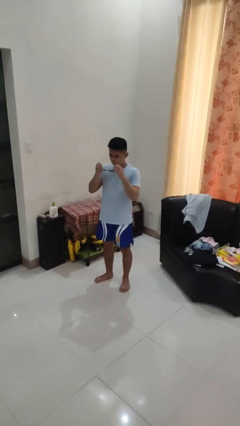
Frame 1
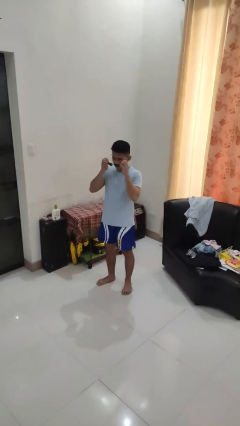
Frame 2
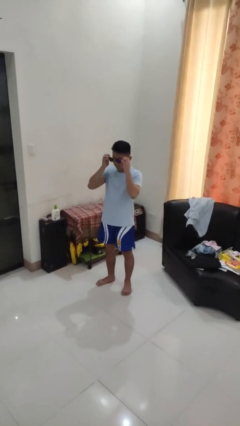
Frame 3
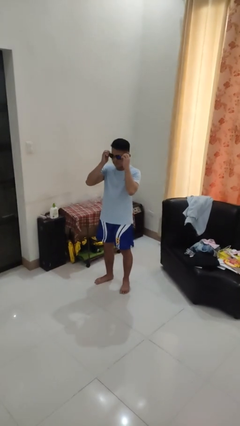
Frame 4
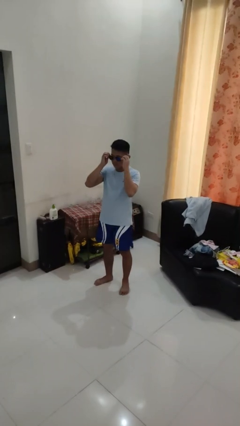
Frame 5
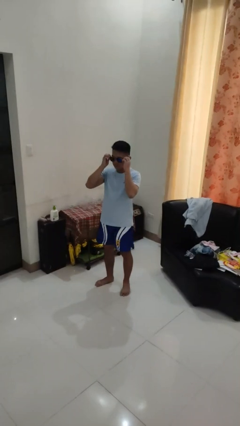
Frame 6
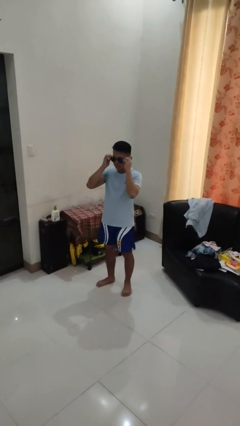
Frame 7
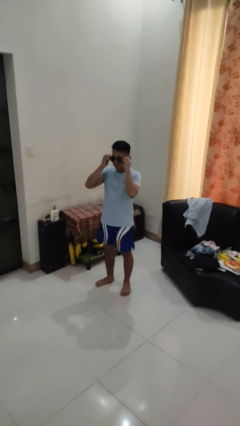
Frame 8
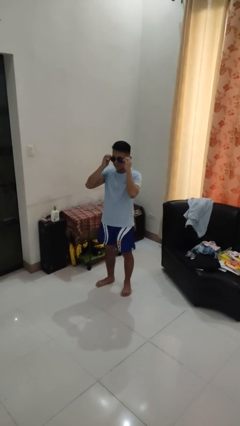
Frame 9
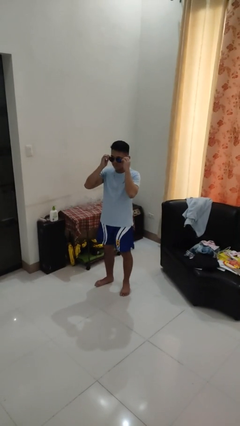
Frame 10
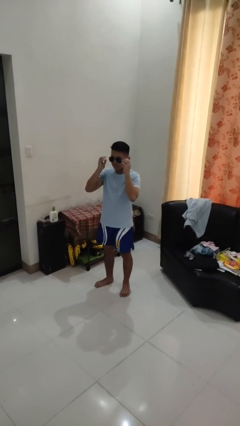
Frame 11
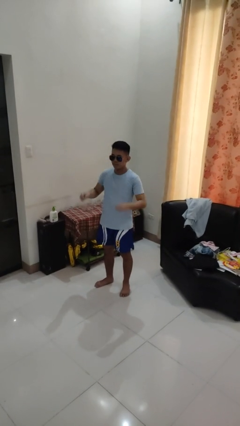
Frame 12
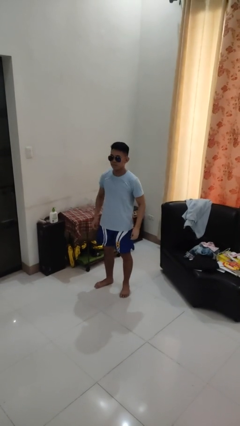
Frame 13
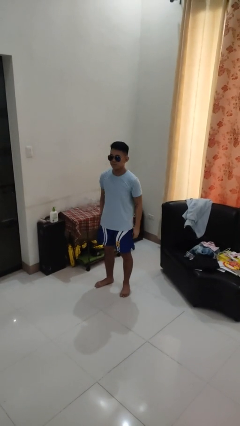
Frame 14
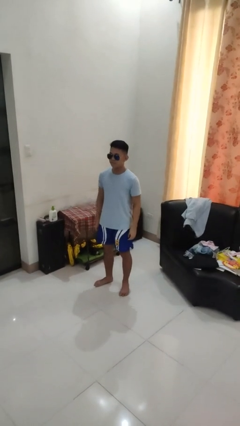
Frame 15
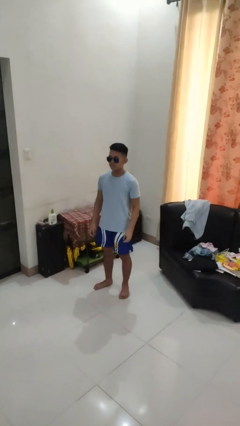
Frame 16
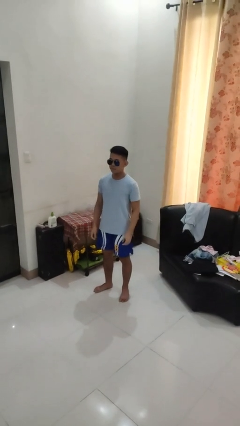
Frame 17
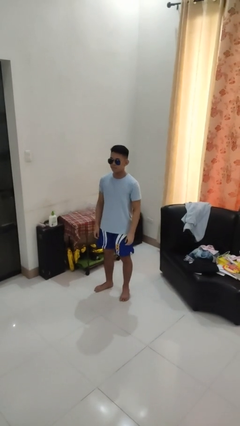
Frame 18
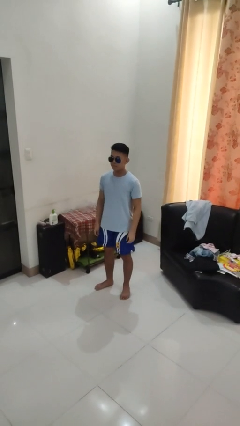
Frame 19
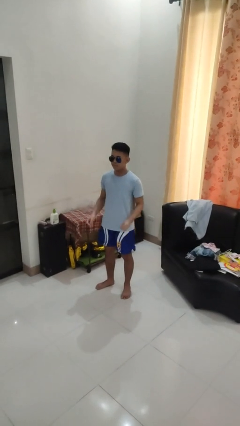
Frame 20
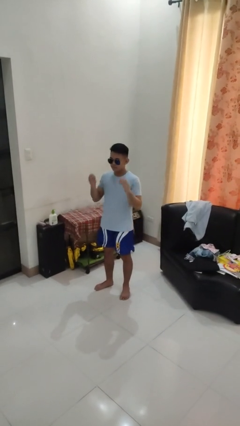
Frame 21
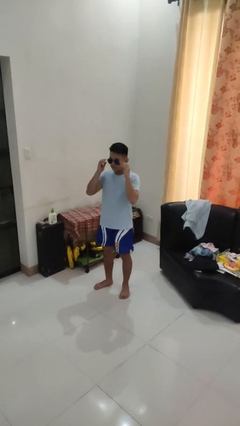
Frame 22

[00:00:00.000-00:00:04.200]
person puts on sunglasses

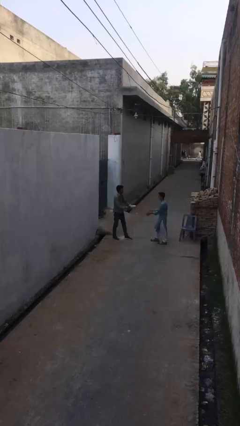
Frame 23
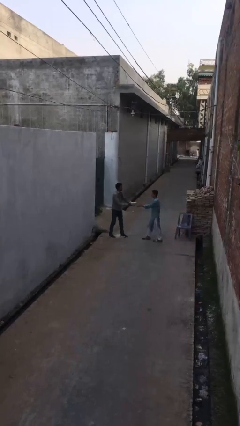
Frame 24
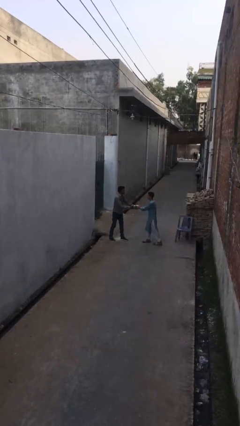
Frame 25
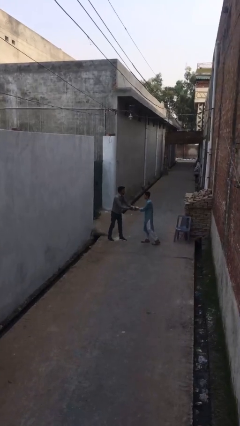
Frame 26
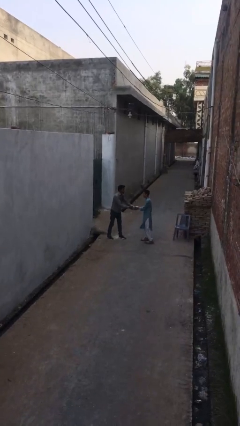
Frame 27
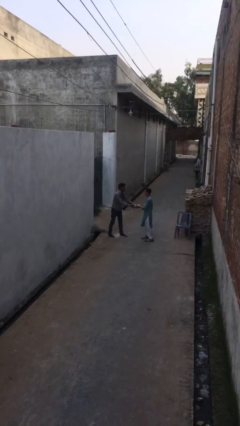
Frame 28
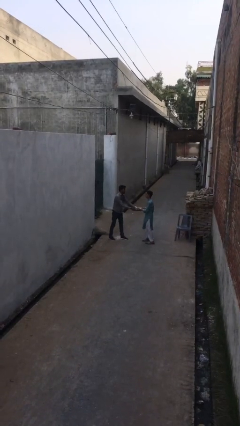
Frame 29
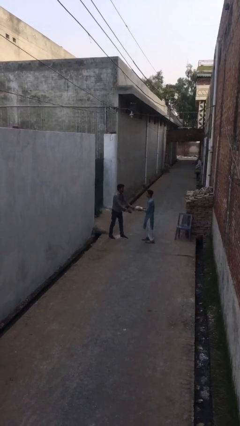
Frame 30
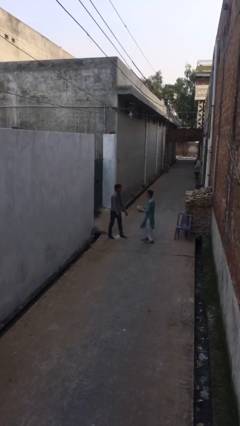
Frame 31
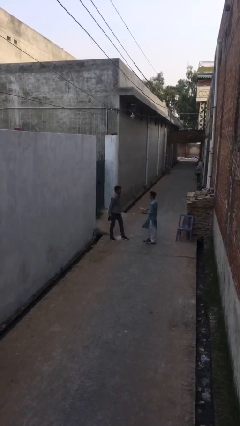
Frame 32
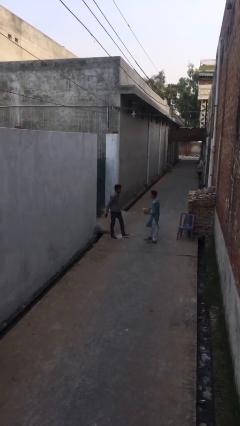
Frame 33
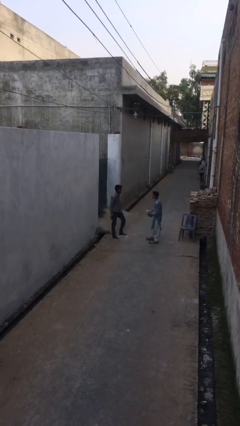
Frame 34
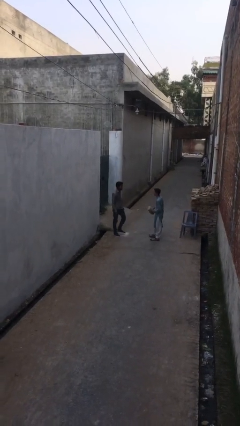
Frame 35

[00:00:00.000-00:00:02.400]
person transfers object to person

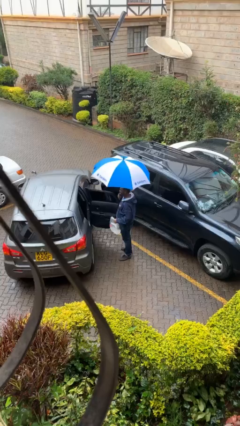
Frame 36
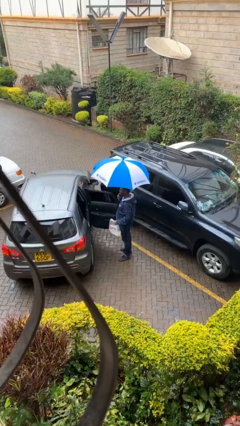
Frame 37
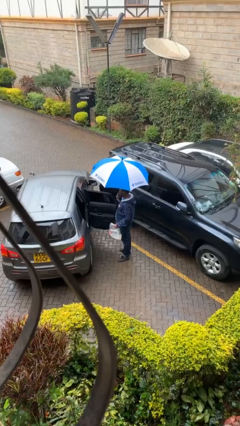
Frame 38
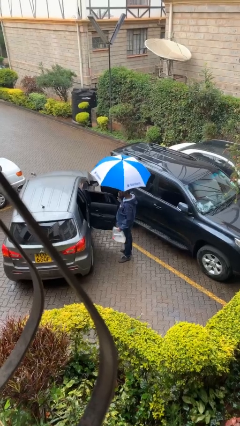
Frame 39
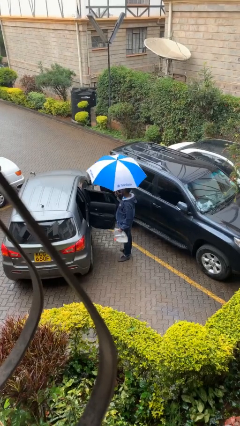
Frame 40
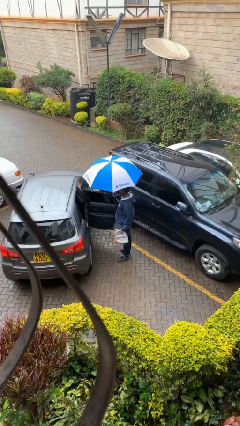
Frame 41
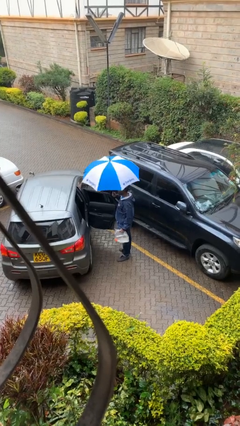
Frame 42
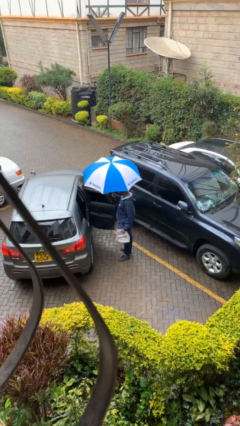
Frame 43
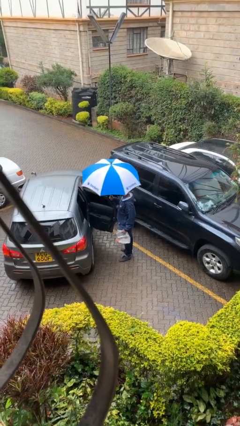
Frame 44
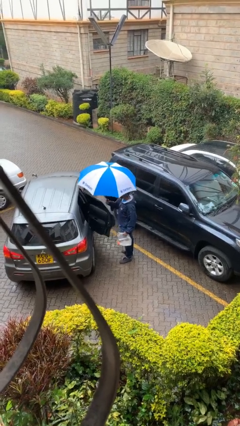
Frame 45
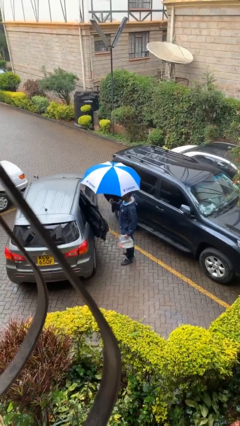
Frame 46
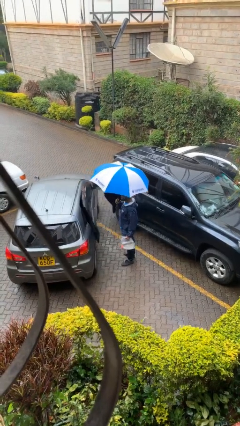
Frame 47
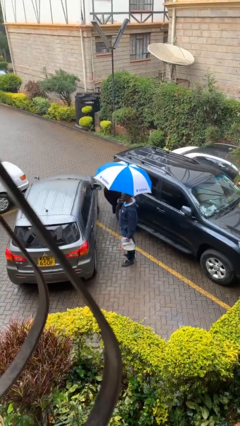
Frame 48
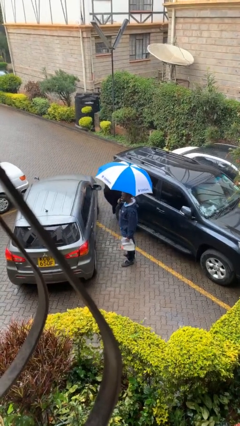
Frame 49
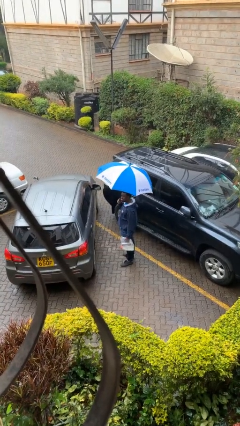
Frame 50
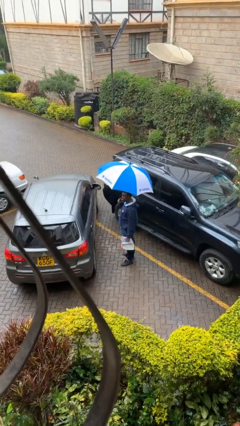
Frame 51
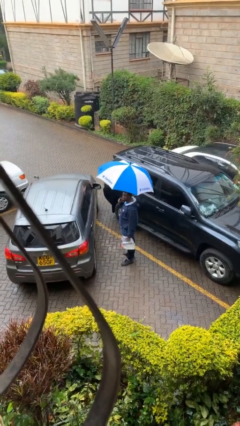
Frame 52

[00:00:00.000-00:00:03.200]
person closes car door

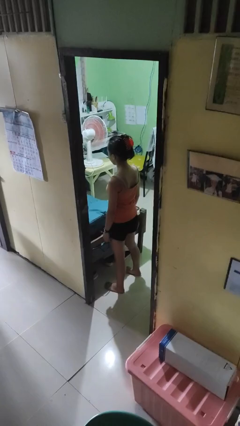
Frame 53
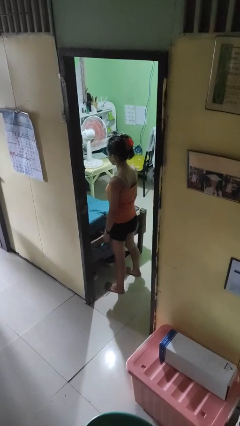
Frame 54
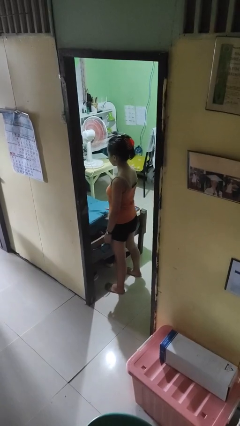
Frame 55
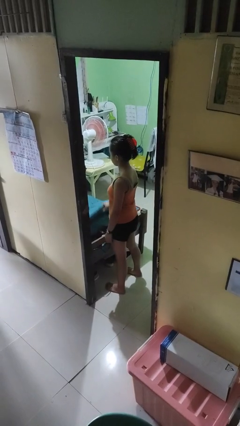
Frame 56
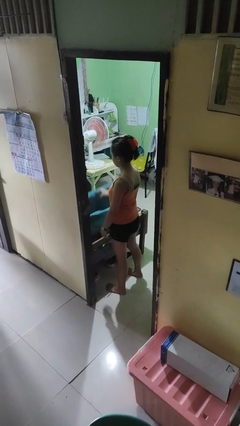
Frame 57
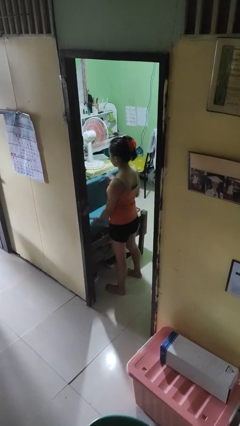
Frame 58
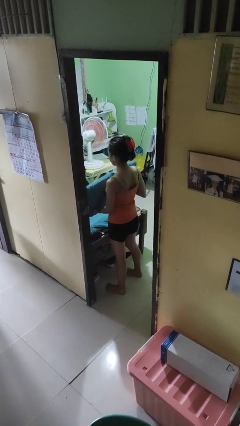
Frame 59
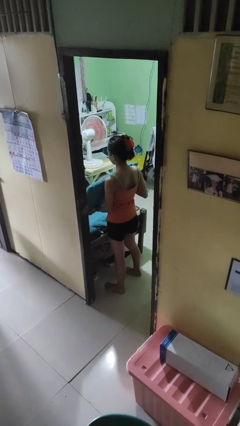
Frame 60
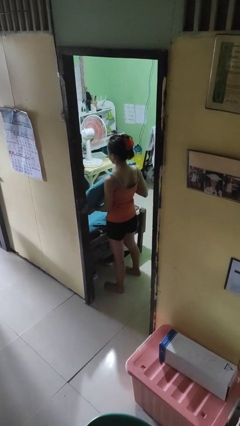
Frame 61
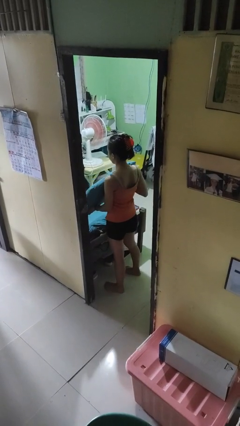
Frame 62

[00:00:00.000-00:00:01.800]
person picks up object from bed

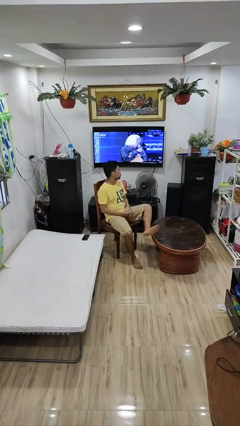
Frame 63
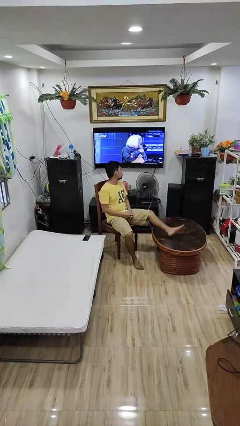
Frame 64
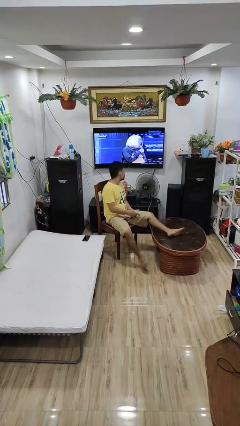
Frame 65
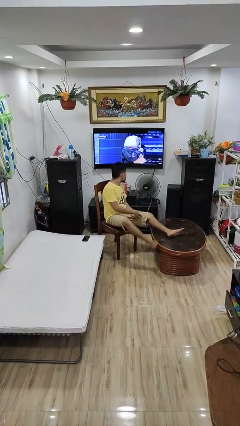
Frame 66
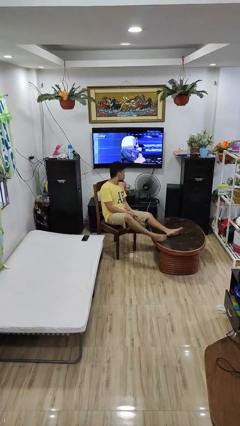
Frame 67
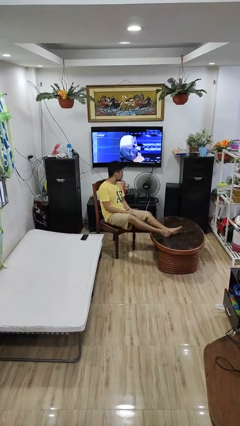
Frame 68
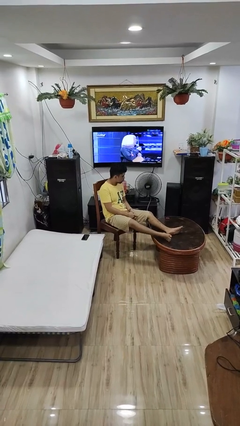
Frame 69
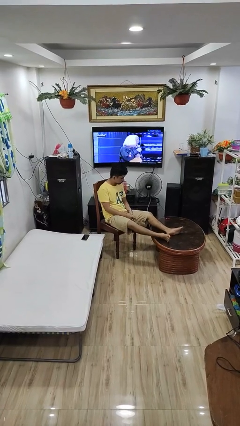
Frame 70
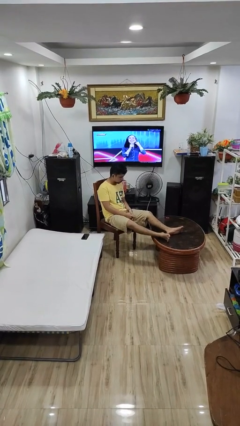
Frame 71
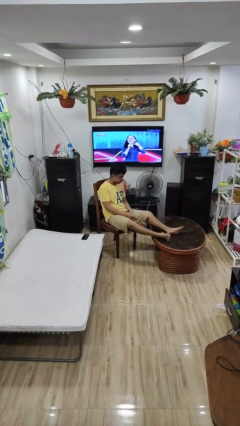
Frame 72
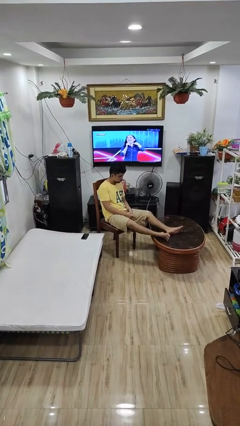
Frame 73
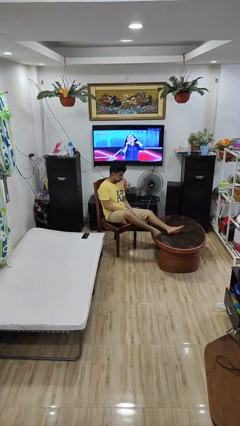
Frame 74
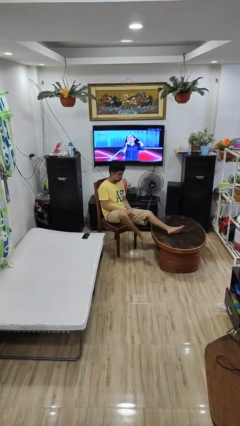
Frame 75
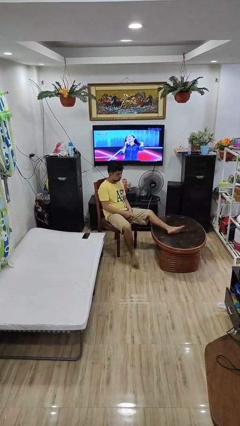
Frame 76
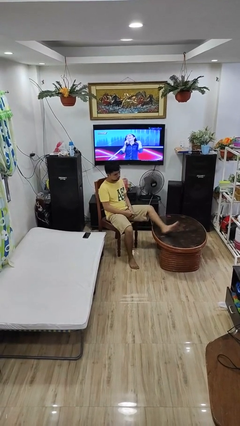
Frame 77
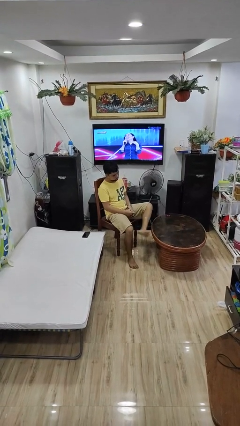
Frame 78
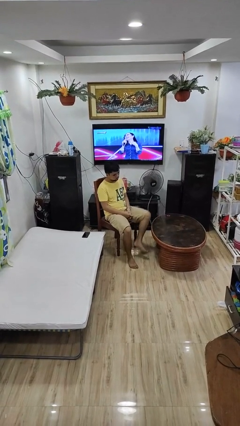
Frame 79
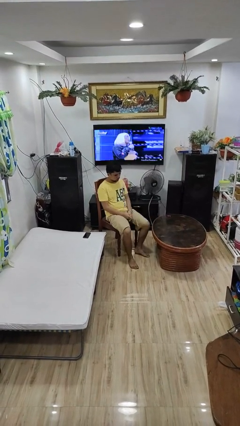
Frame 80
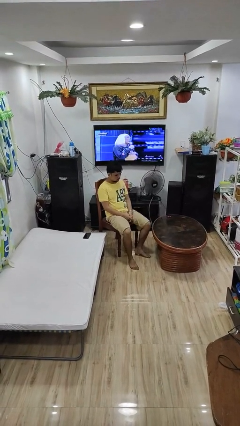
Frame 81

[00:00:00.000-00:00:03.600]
person puts feet up

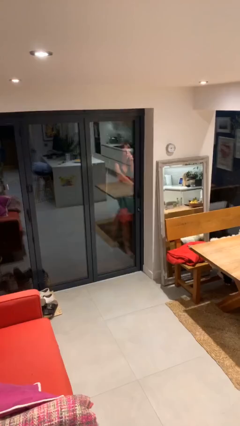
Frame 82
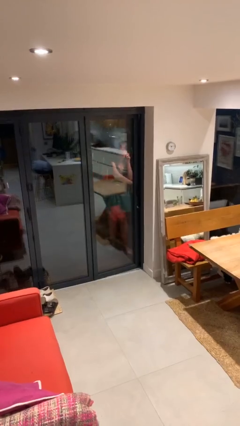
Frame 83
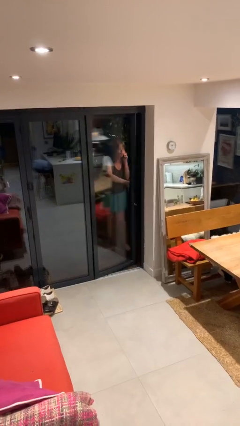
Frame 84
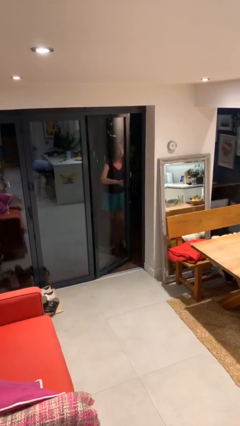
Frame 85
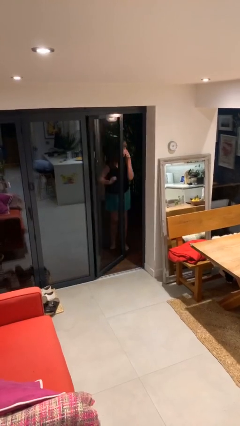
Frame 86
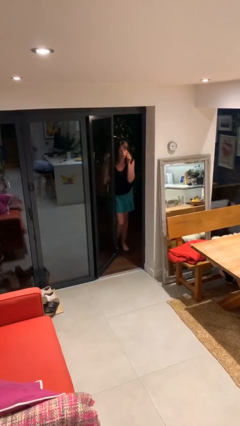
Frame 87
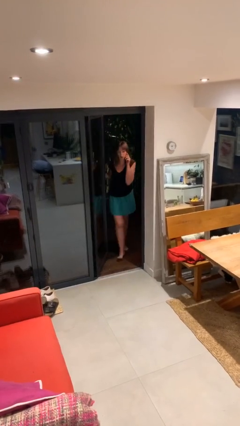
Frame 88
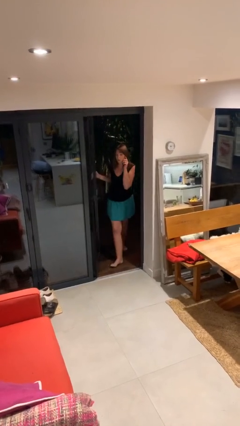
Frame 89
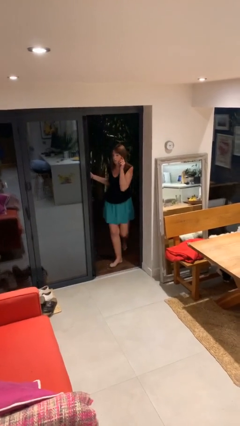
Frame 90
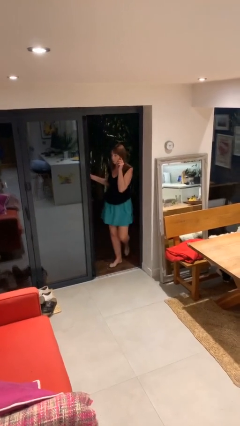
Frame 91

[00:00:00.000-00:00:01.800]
person opens facility door
